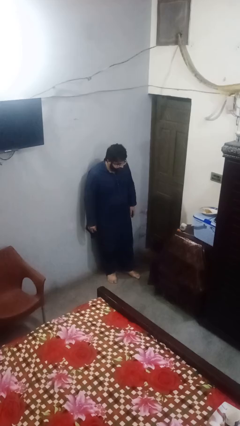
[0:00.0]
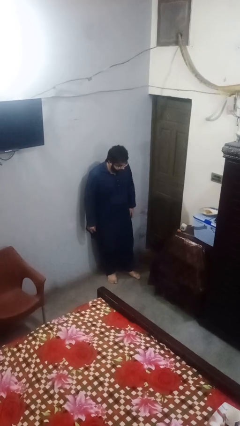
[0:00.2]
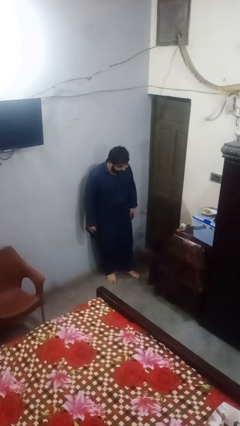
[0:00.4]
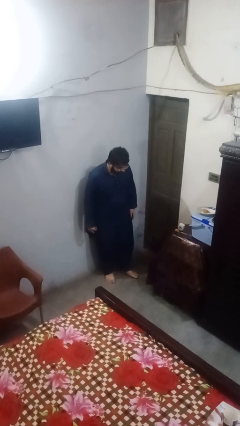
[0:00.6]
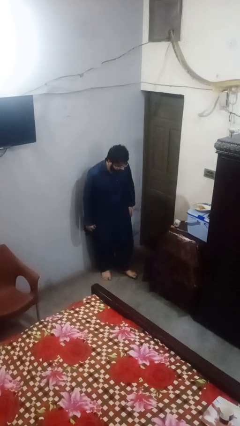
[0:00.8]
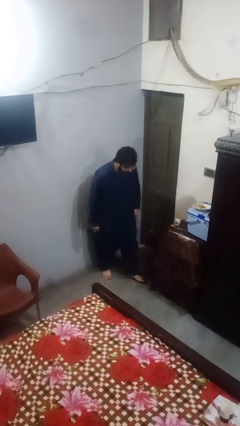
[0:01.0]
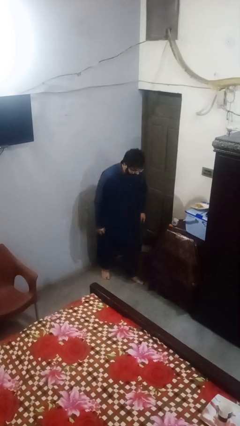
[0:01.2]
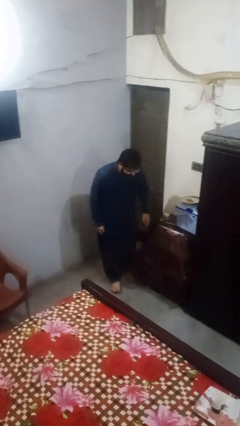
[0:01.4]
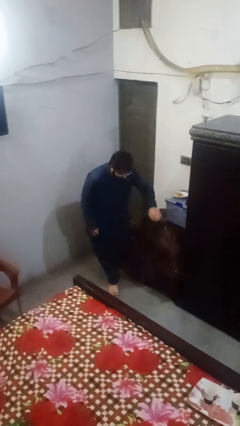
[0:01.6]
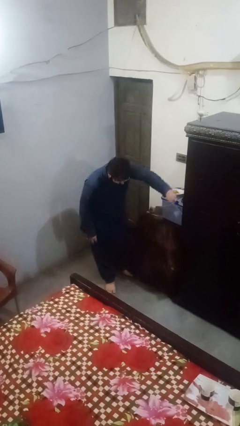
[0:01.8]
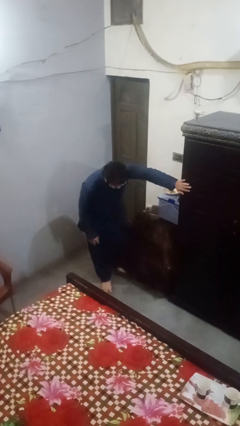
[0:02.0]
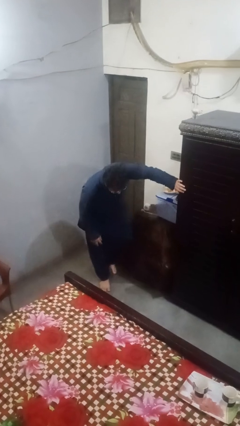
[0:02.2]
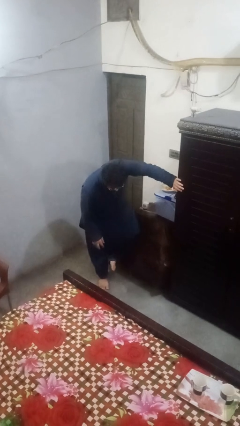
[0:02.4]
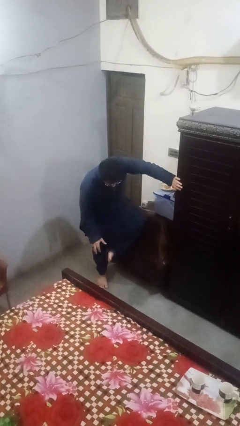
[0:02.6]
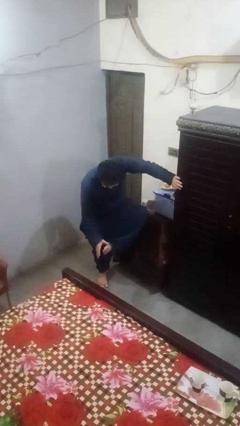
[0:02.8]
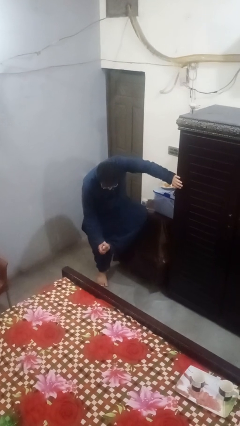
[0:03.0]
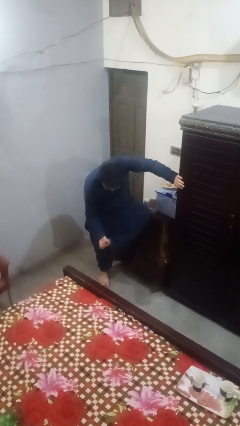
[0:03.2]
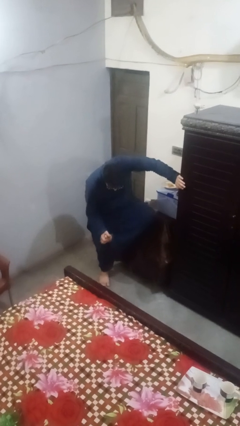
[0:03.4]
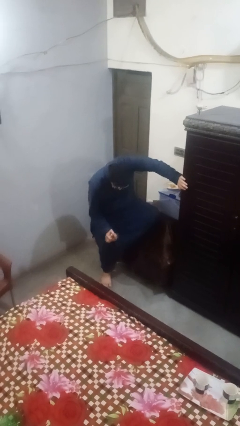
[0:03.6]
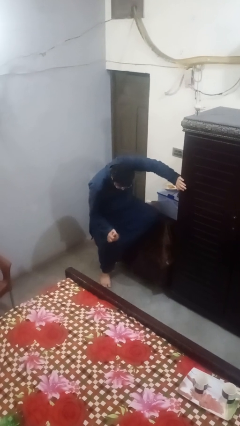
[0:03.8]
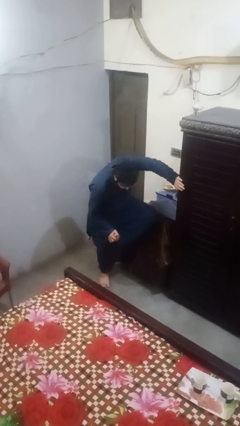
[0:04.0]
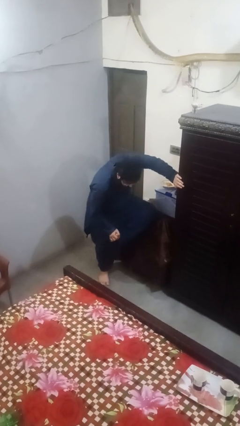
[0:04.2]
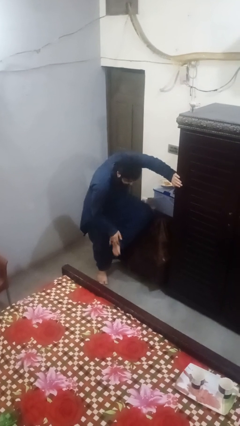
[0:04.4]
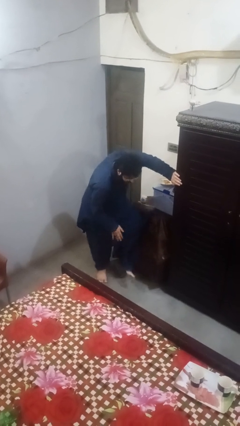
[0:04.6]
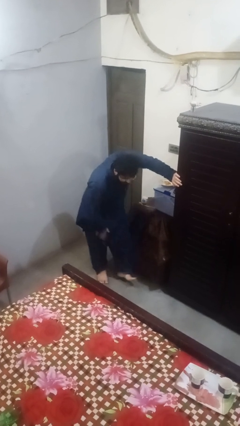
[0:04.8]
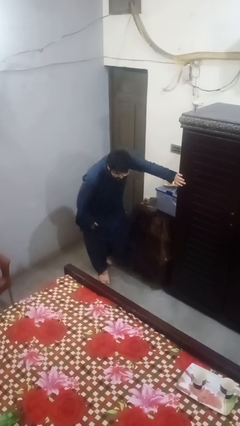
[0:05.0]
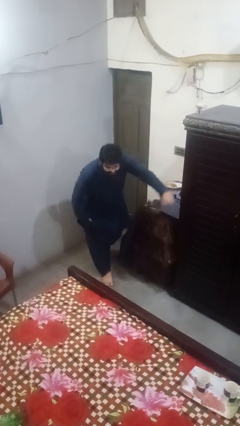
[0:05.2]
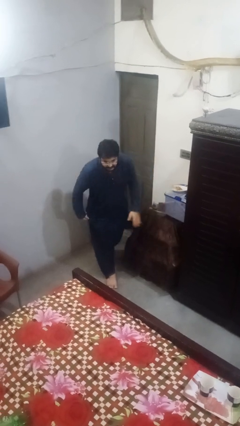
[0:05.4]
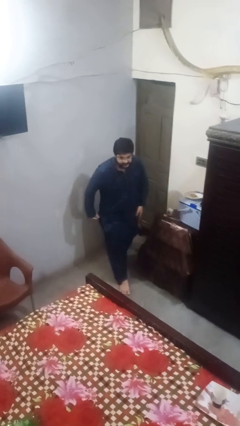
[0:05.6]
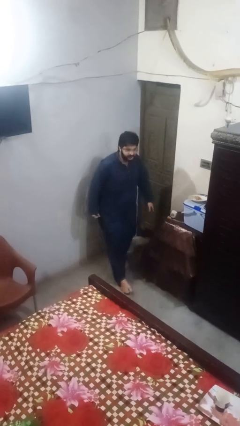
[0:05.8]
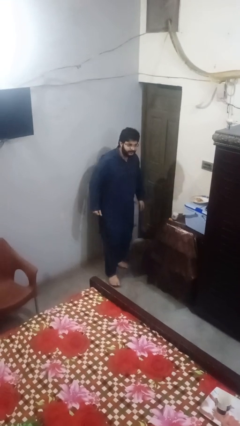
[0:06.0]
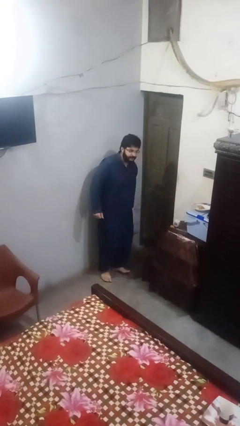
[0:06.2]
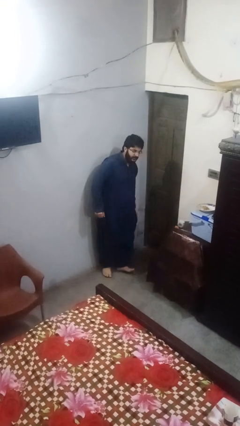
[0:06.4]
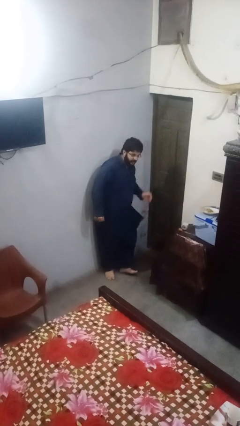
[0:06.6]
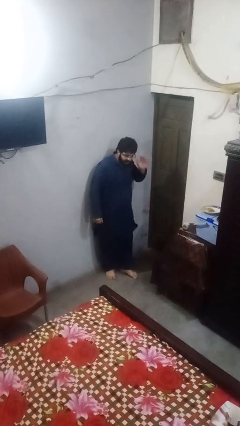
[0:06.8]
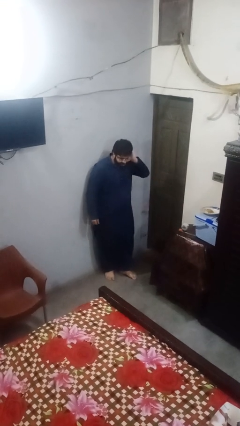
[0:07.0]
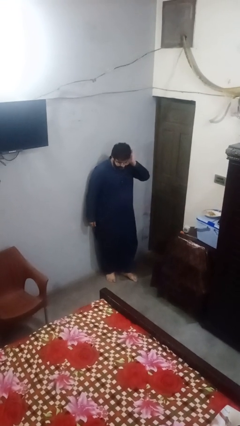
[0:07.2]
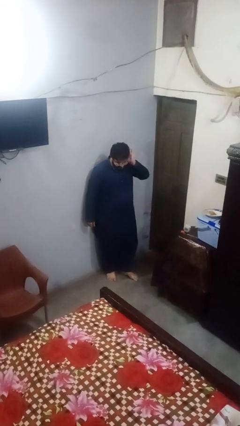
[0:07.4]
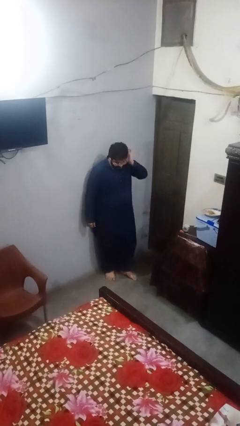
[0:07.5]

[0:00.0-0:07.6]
person stubs toe

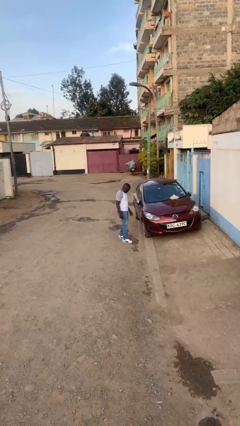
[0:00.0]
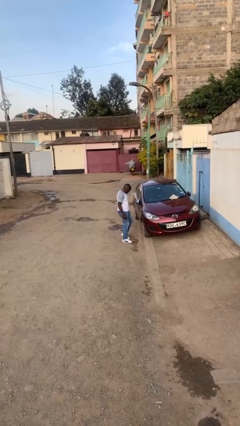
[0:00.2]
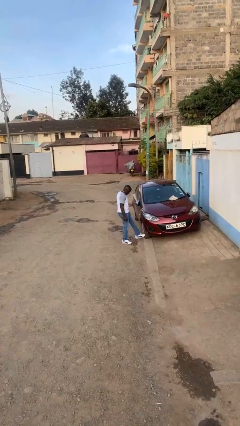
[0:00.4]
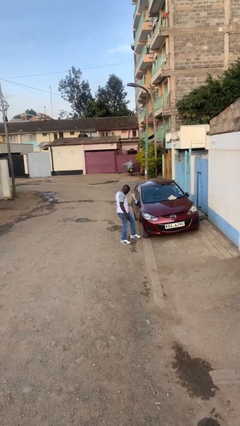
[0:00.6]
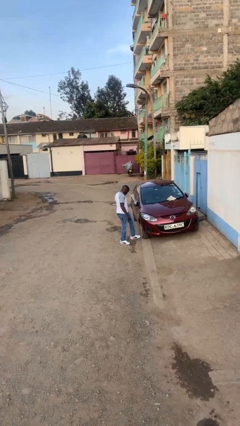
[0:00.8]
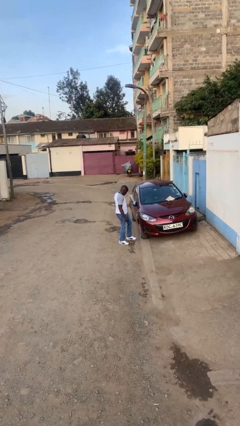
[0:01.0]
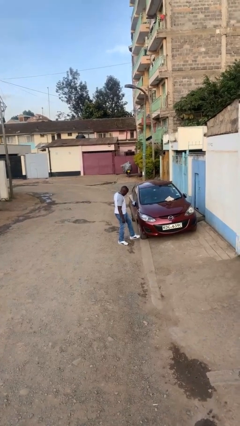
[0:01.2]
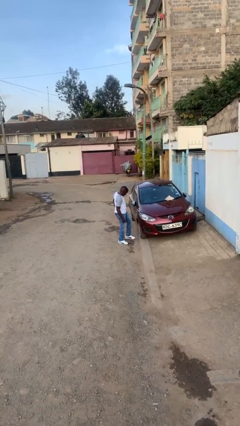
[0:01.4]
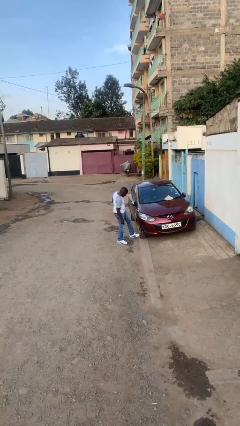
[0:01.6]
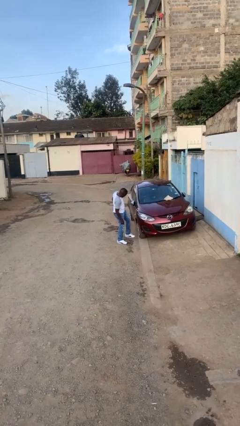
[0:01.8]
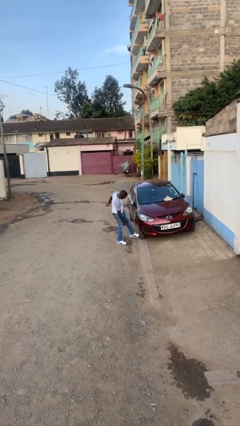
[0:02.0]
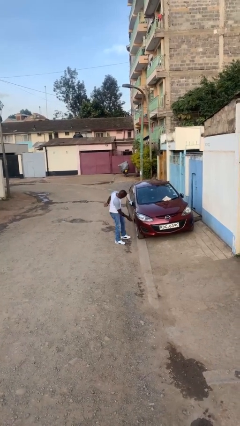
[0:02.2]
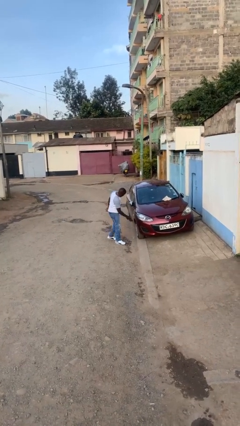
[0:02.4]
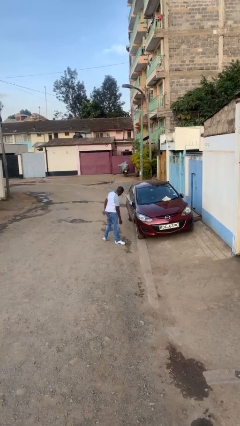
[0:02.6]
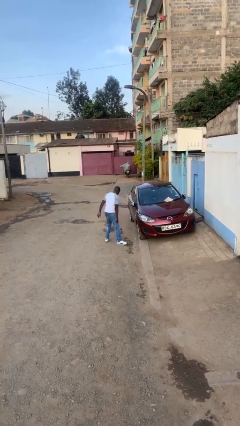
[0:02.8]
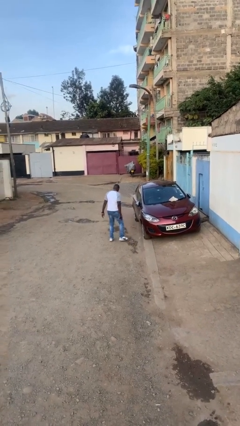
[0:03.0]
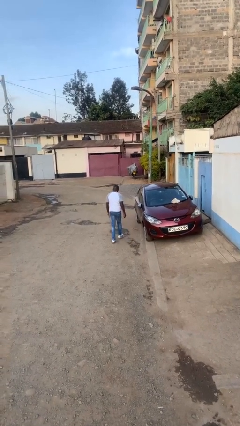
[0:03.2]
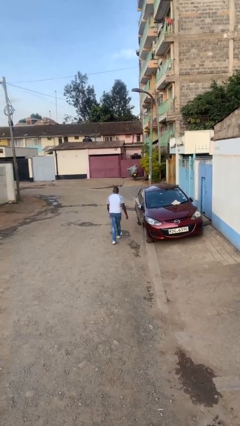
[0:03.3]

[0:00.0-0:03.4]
person kicks car tires

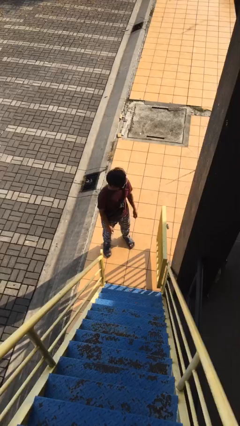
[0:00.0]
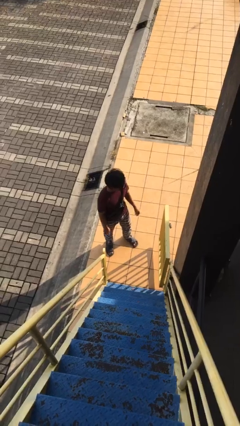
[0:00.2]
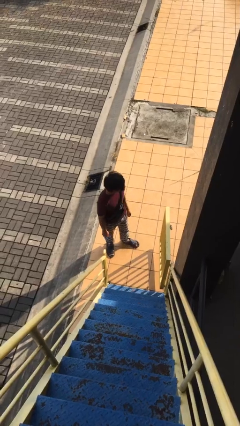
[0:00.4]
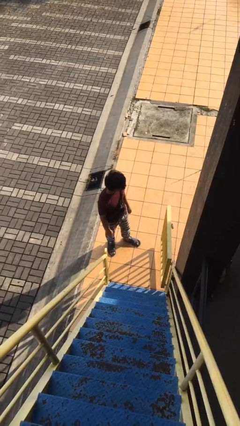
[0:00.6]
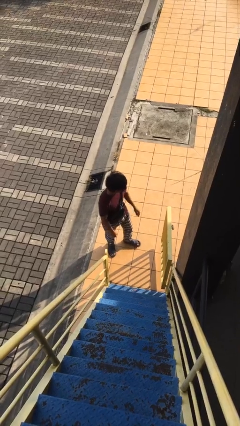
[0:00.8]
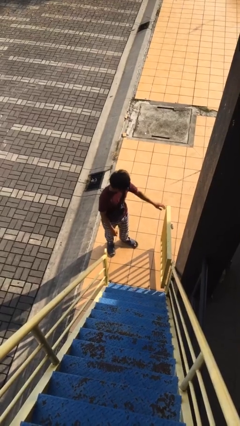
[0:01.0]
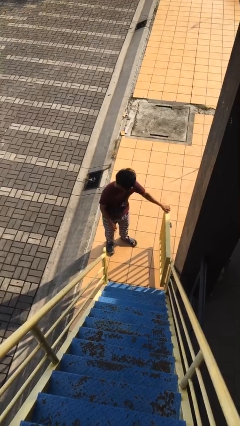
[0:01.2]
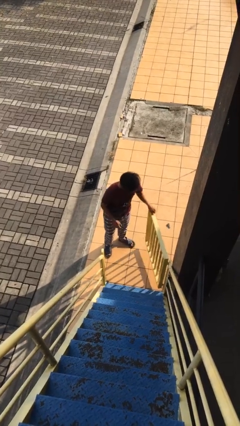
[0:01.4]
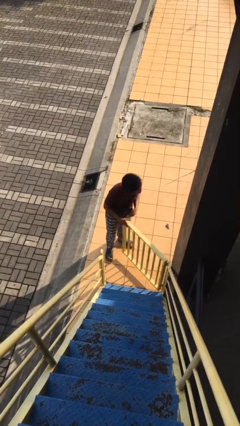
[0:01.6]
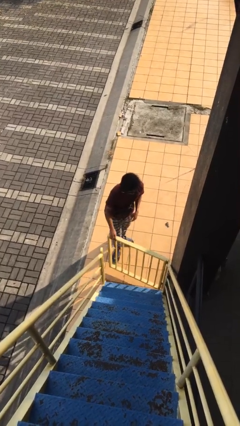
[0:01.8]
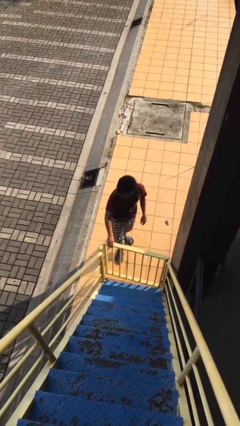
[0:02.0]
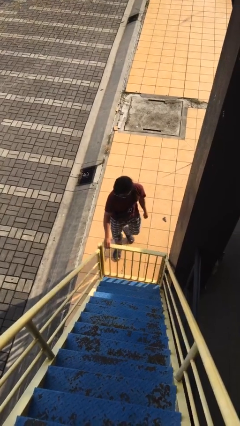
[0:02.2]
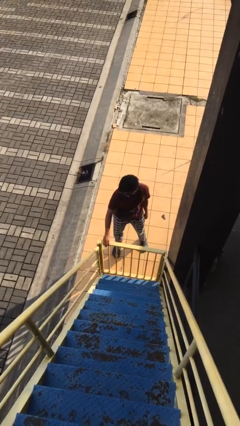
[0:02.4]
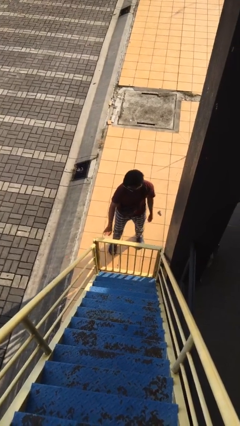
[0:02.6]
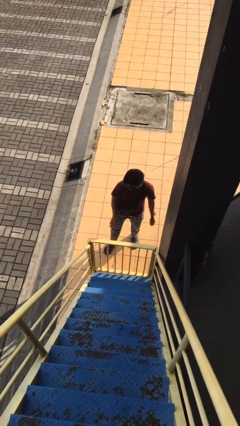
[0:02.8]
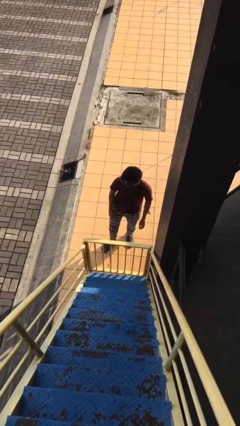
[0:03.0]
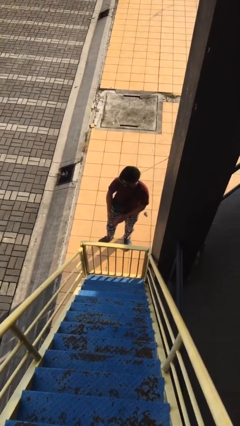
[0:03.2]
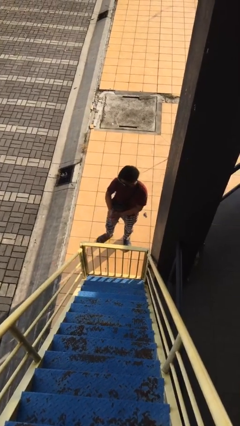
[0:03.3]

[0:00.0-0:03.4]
person closes facility door

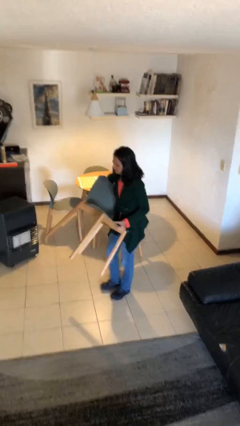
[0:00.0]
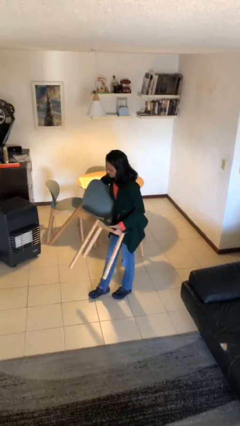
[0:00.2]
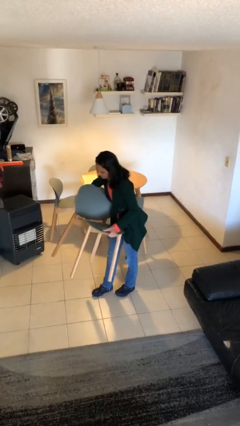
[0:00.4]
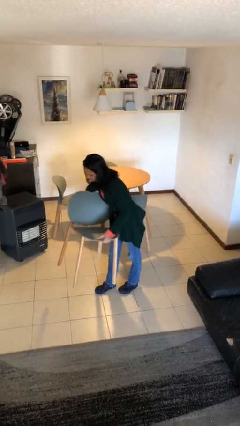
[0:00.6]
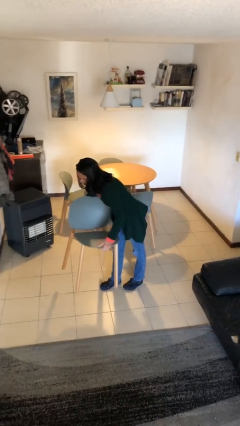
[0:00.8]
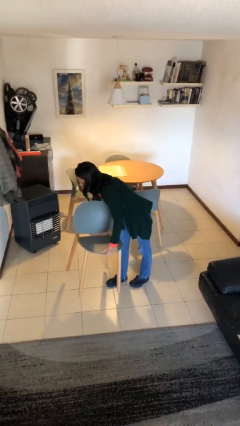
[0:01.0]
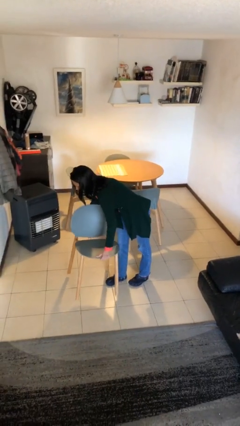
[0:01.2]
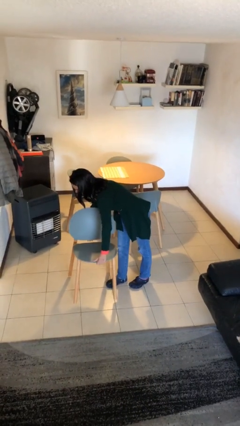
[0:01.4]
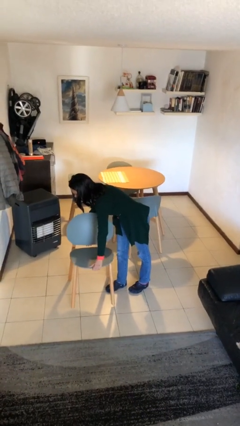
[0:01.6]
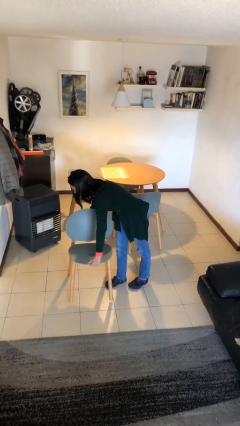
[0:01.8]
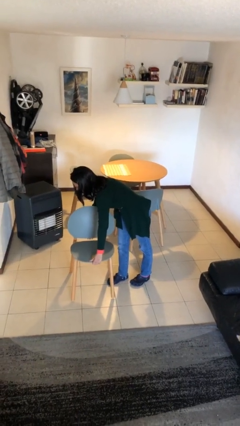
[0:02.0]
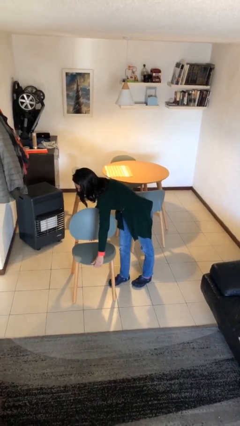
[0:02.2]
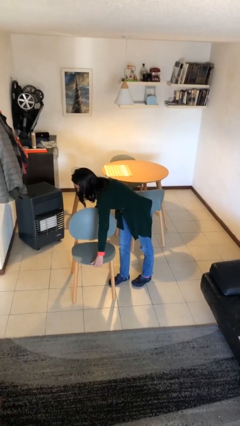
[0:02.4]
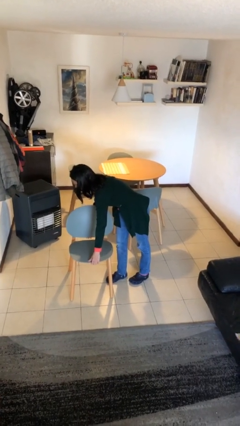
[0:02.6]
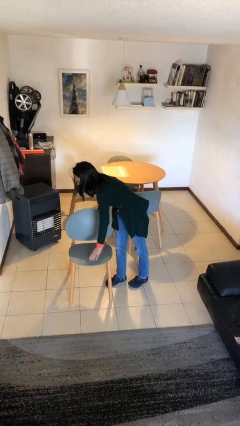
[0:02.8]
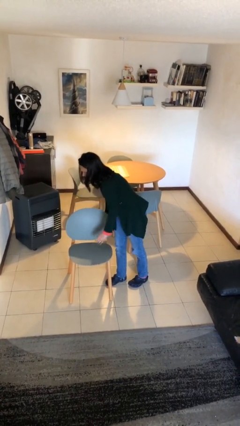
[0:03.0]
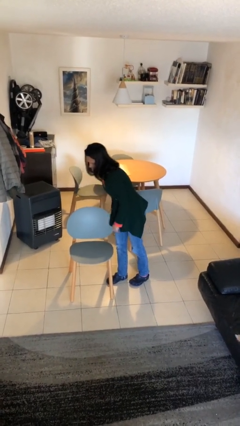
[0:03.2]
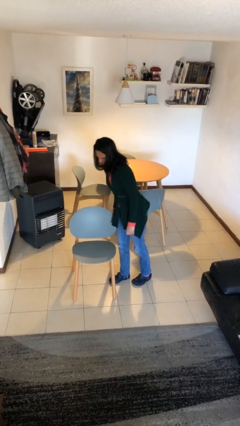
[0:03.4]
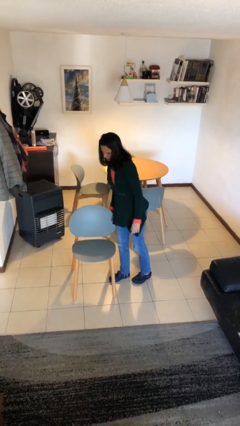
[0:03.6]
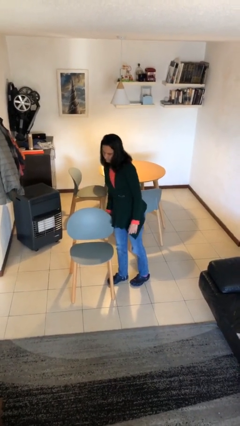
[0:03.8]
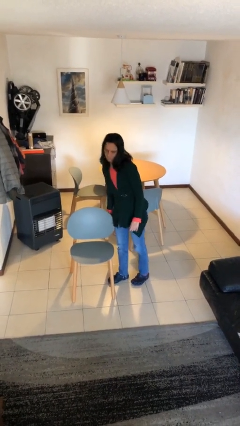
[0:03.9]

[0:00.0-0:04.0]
person puts down object on floor
